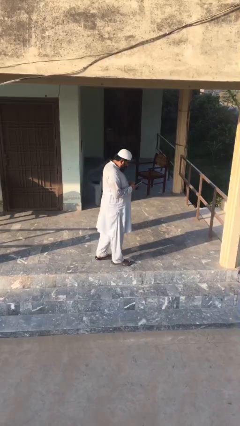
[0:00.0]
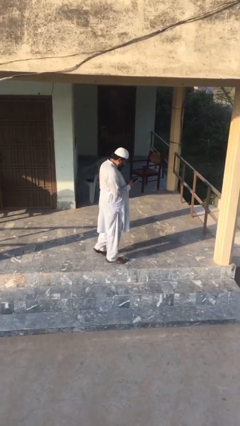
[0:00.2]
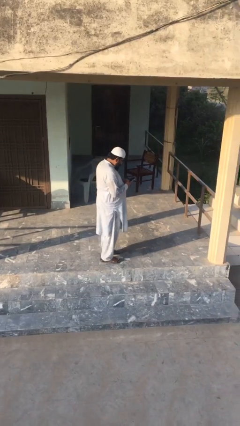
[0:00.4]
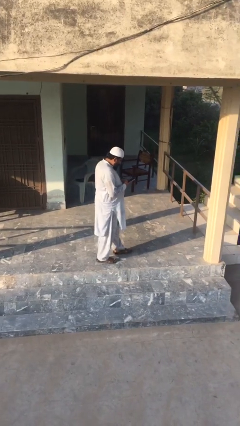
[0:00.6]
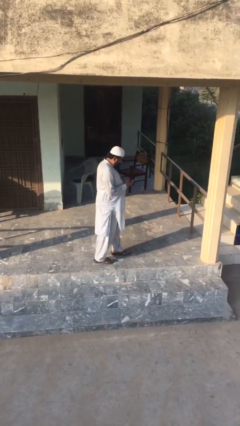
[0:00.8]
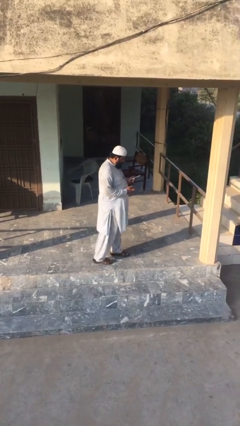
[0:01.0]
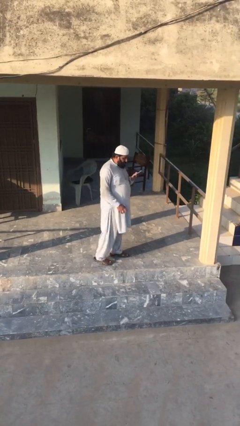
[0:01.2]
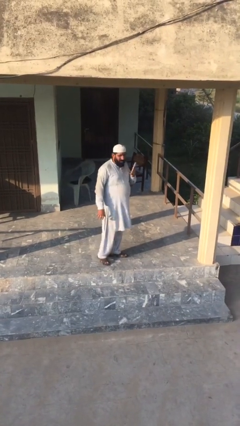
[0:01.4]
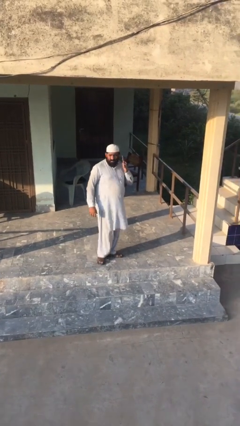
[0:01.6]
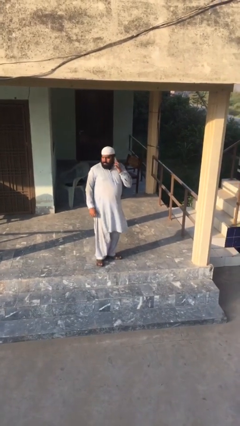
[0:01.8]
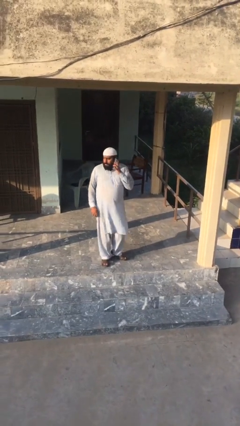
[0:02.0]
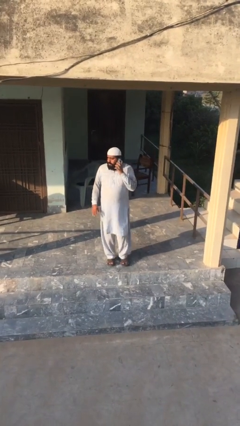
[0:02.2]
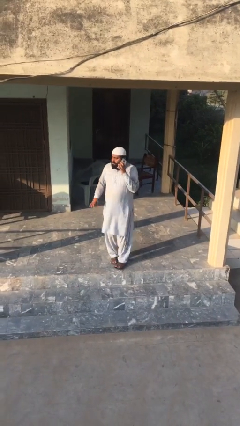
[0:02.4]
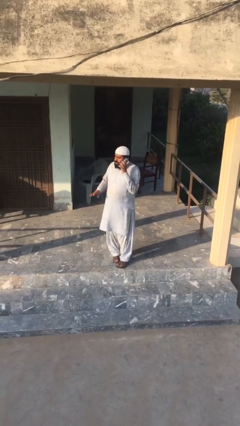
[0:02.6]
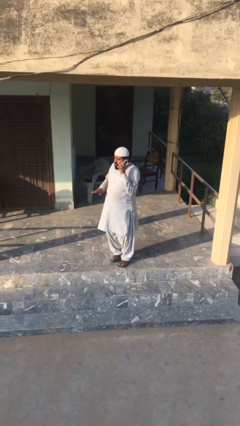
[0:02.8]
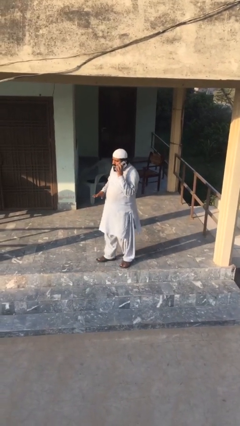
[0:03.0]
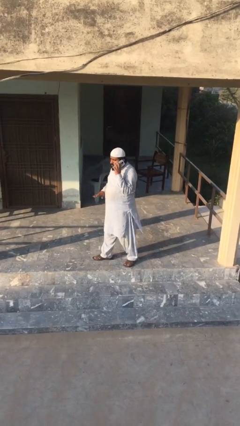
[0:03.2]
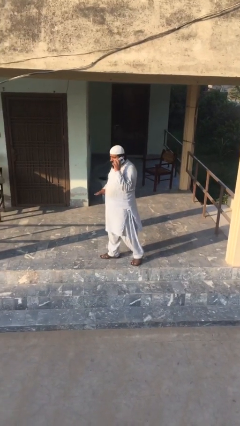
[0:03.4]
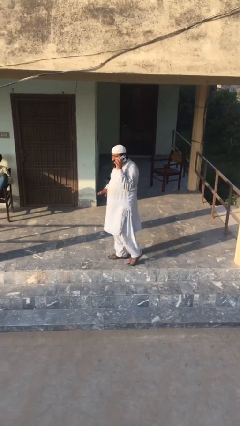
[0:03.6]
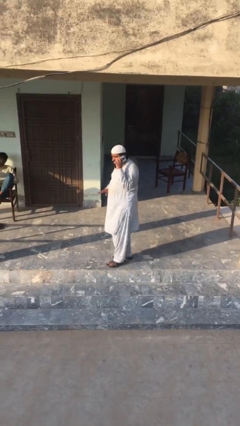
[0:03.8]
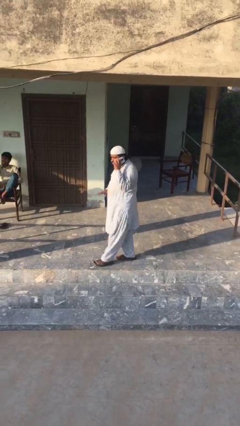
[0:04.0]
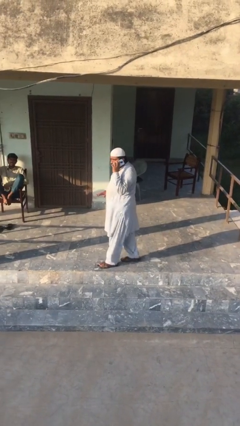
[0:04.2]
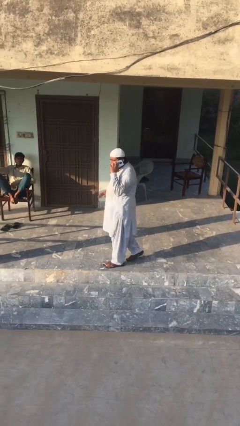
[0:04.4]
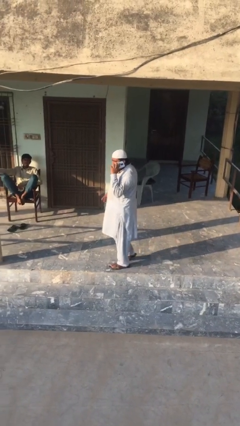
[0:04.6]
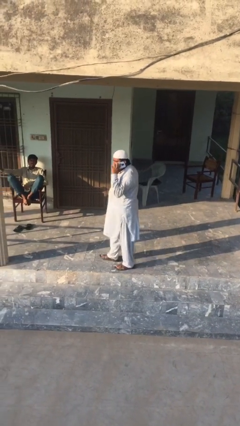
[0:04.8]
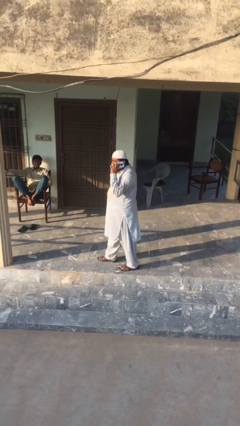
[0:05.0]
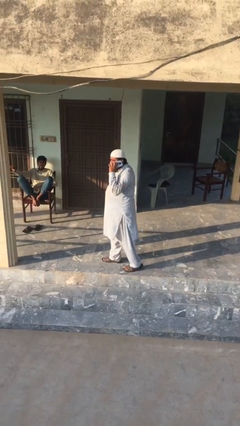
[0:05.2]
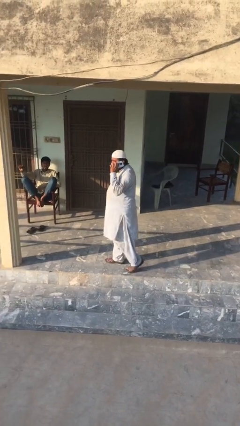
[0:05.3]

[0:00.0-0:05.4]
person talks on phone

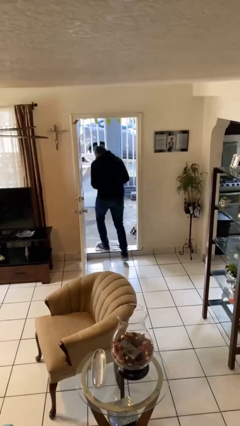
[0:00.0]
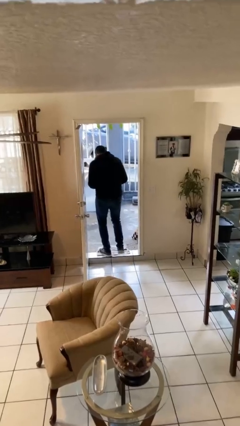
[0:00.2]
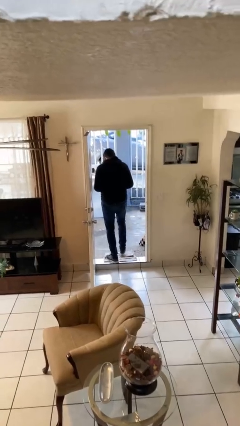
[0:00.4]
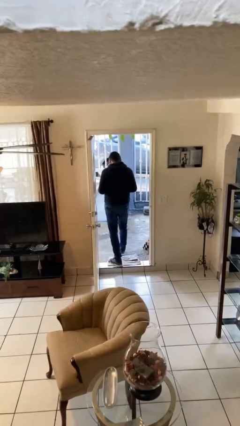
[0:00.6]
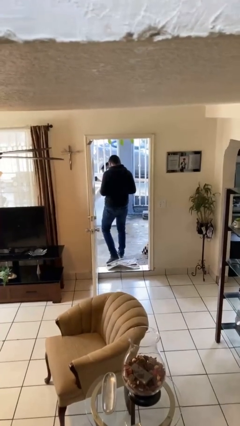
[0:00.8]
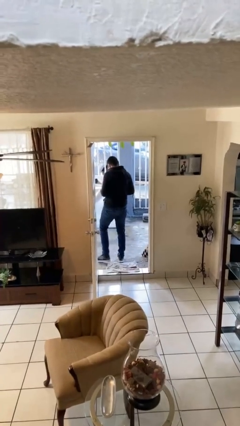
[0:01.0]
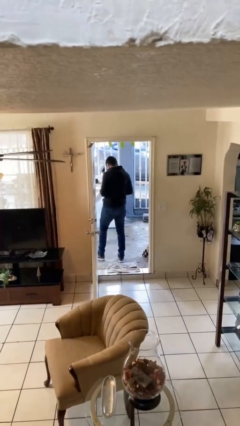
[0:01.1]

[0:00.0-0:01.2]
person exits scene through structure

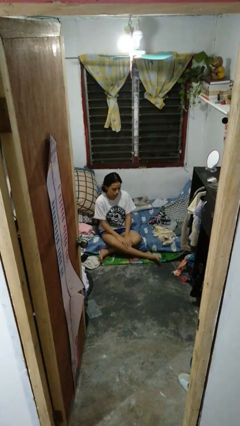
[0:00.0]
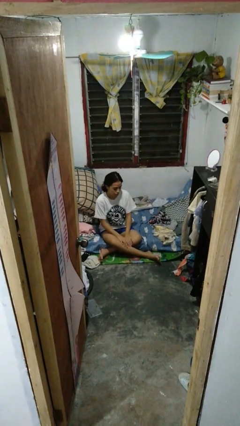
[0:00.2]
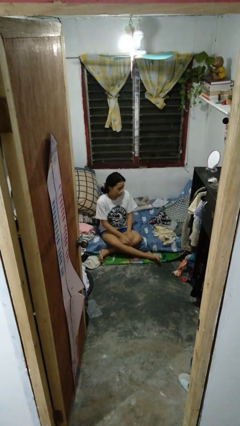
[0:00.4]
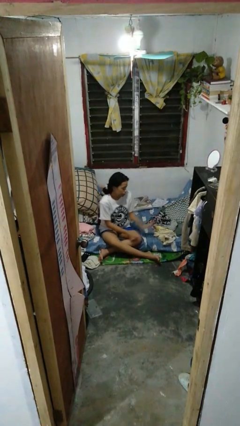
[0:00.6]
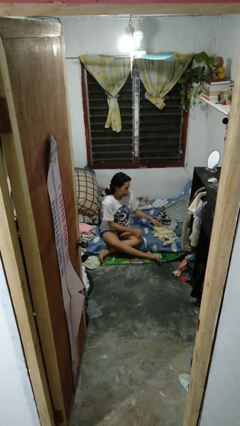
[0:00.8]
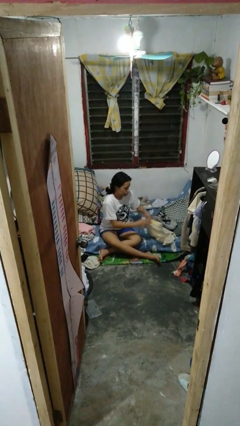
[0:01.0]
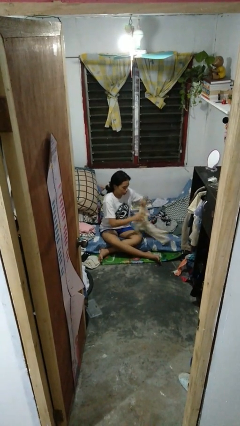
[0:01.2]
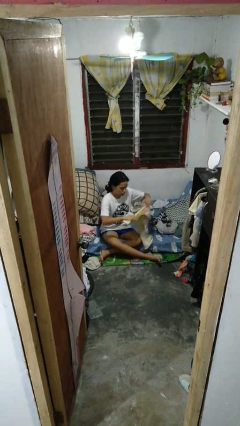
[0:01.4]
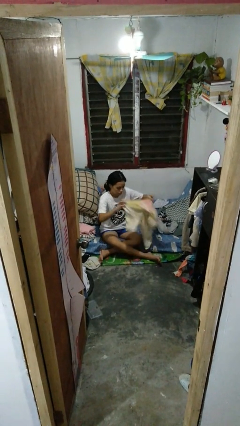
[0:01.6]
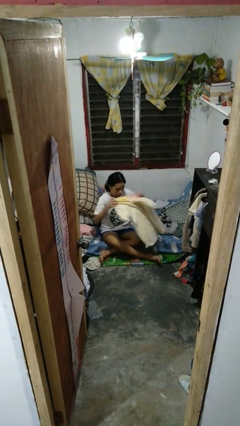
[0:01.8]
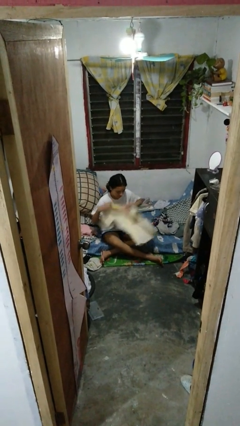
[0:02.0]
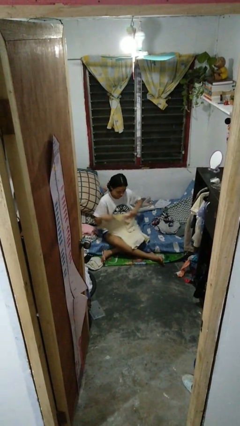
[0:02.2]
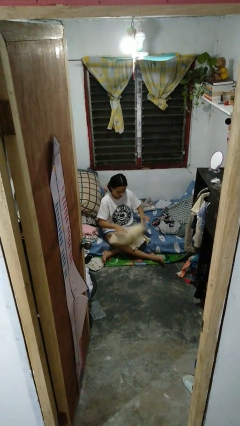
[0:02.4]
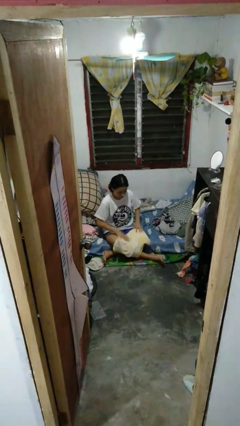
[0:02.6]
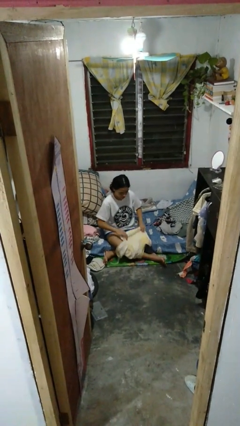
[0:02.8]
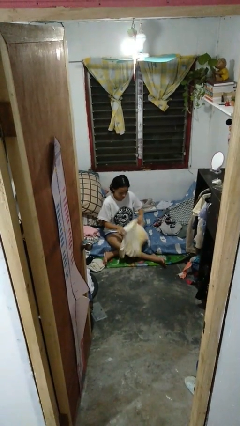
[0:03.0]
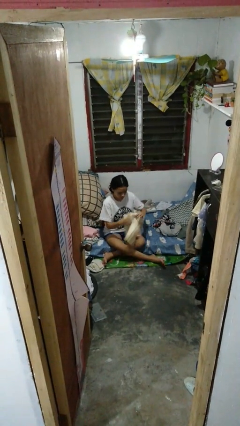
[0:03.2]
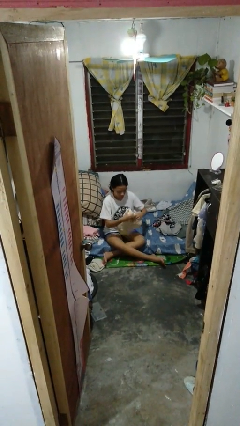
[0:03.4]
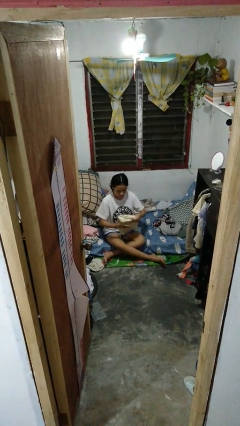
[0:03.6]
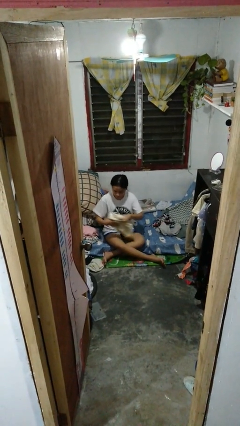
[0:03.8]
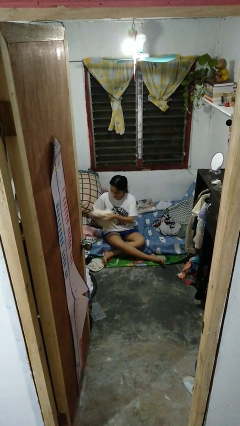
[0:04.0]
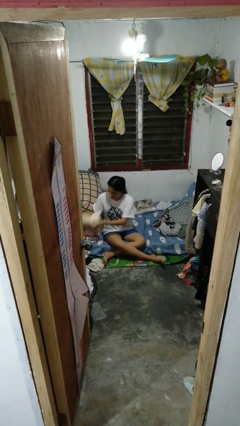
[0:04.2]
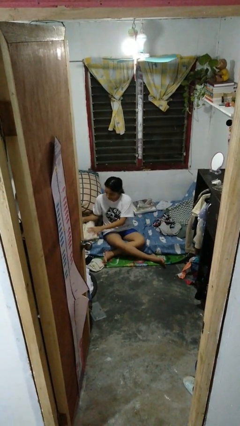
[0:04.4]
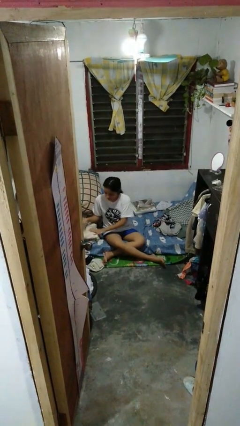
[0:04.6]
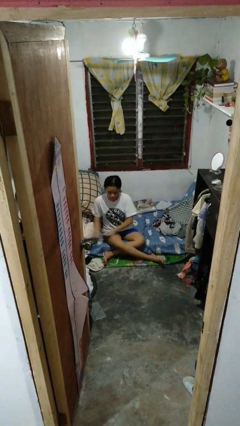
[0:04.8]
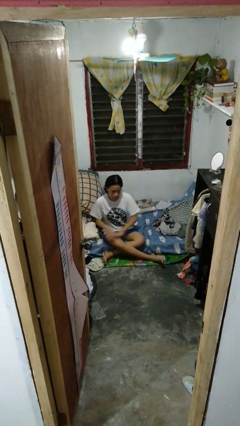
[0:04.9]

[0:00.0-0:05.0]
person folds shirt

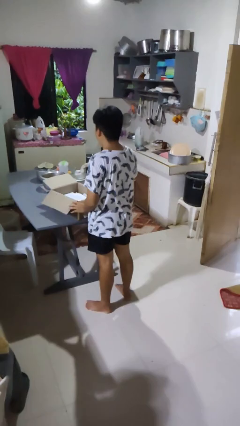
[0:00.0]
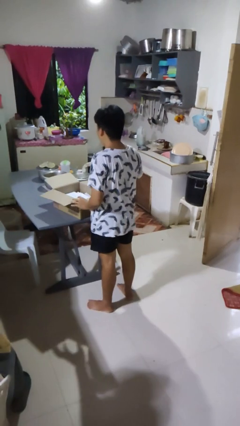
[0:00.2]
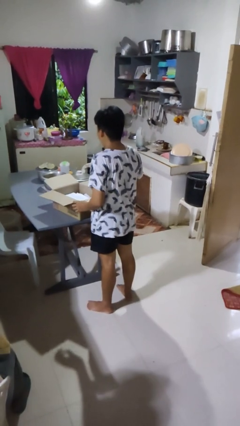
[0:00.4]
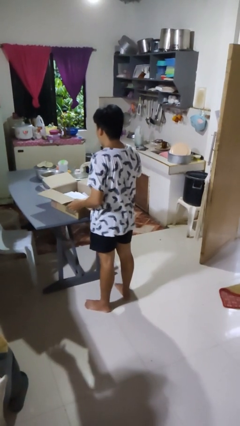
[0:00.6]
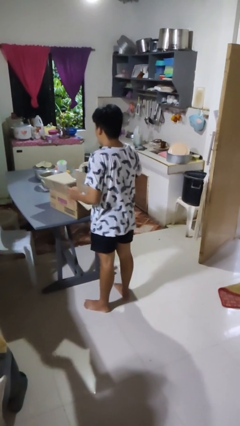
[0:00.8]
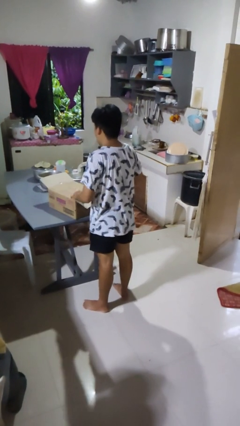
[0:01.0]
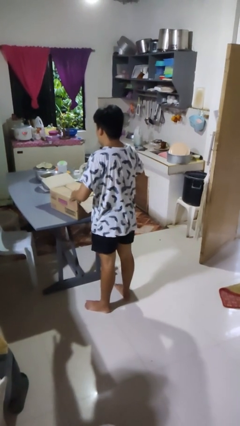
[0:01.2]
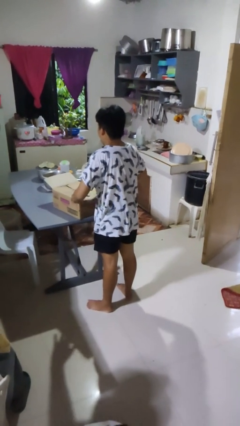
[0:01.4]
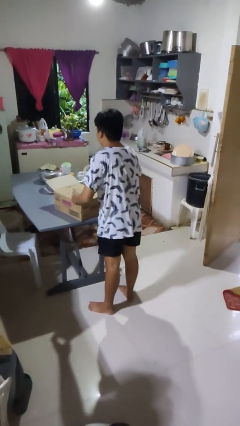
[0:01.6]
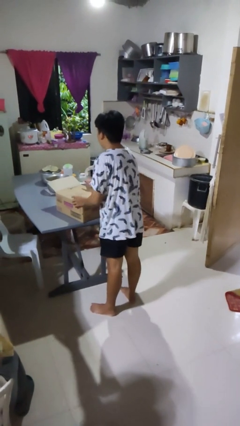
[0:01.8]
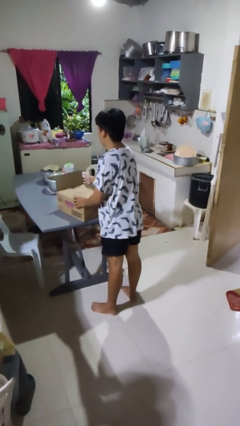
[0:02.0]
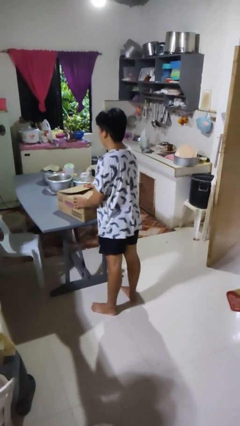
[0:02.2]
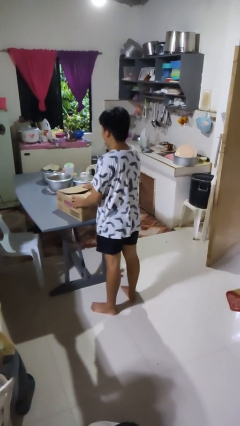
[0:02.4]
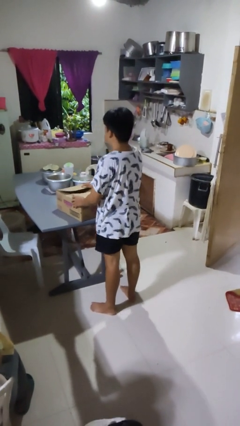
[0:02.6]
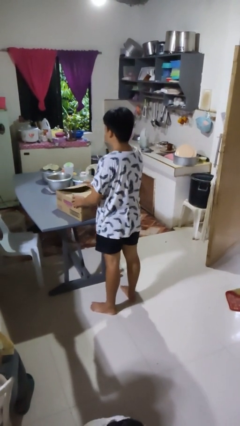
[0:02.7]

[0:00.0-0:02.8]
person closes box

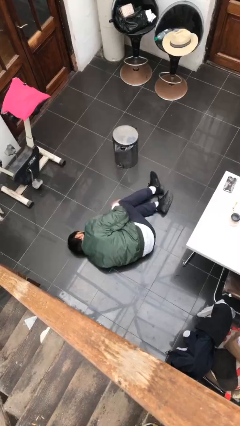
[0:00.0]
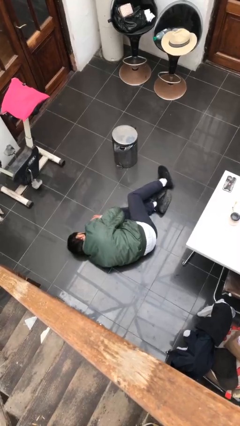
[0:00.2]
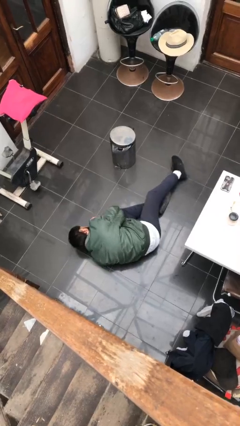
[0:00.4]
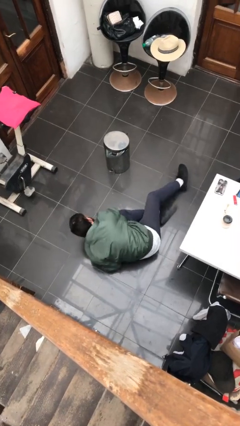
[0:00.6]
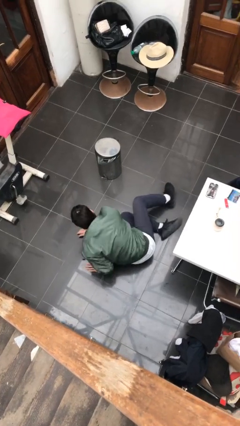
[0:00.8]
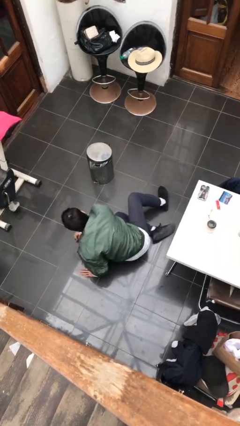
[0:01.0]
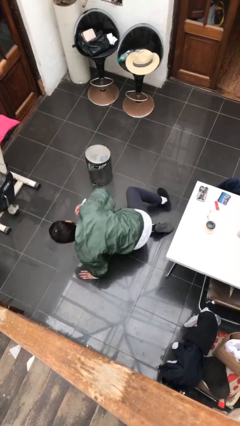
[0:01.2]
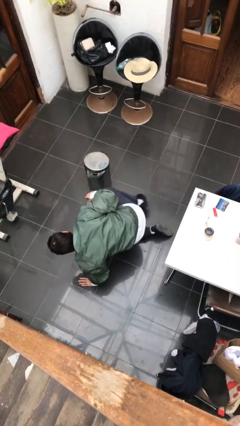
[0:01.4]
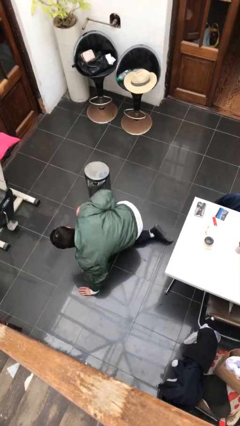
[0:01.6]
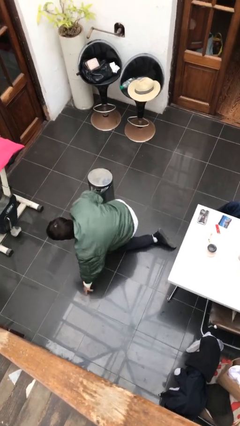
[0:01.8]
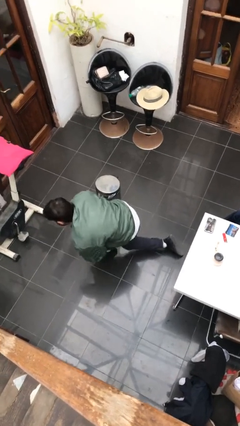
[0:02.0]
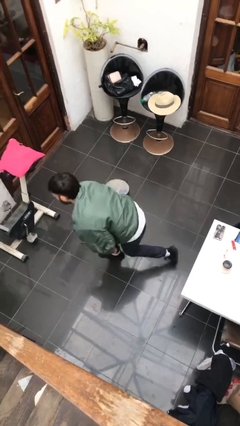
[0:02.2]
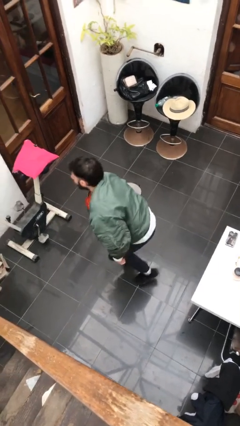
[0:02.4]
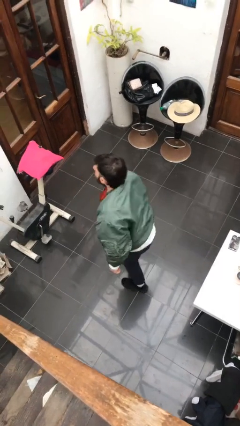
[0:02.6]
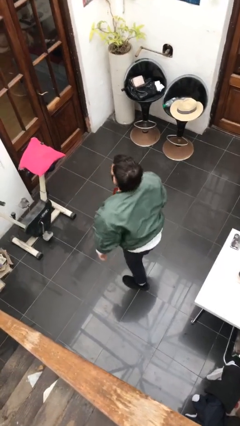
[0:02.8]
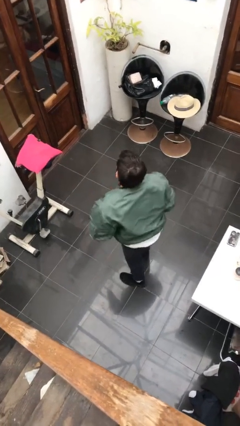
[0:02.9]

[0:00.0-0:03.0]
person stands up from floor

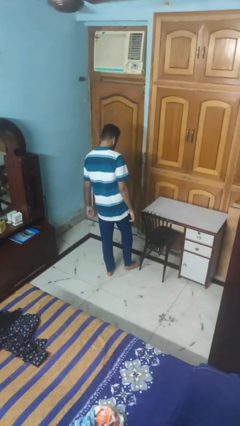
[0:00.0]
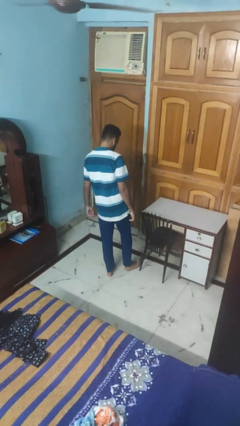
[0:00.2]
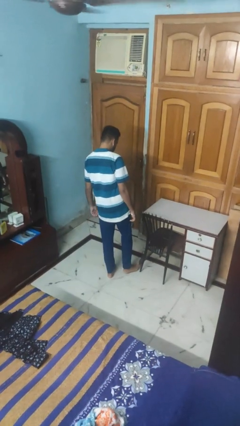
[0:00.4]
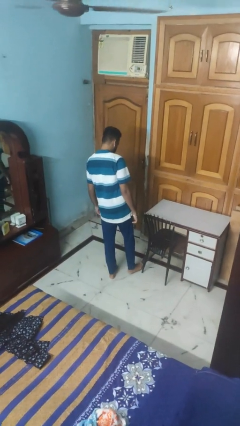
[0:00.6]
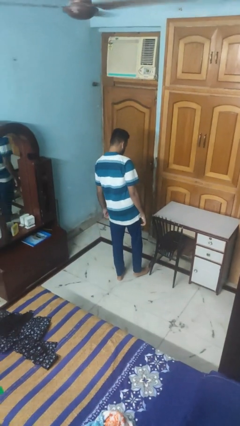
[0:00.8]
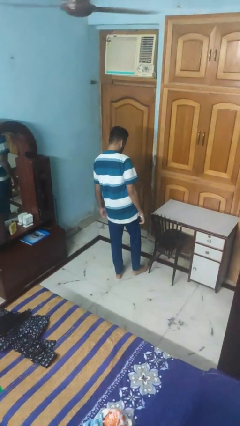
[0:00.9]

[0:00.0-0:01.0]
person stubs toe
